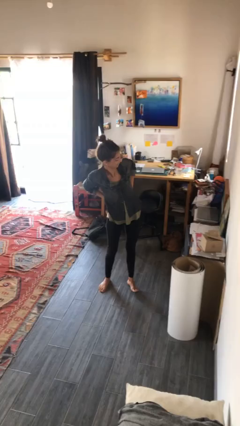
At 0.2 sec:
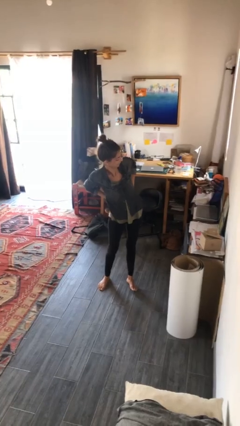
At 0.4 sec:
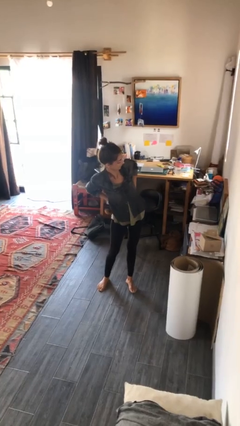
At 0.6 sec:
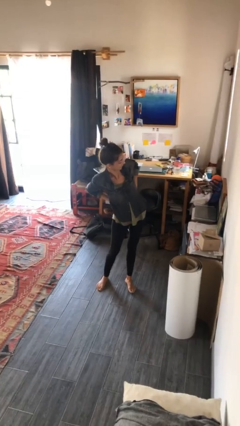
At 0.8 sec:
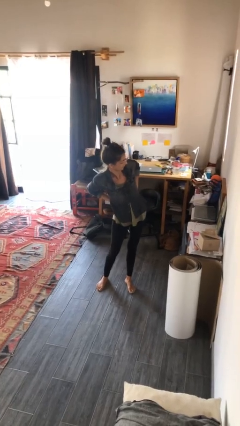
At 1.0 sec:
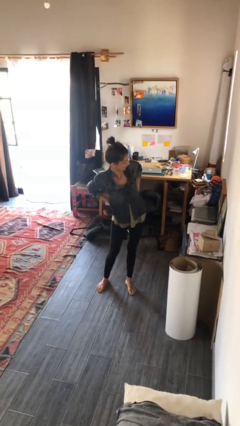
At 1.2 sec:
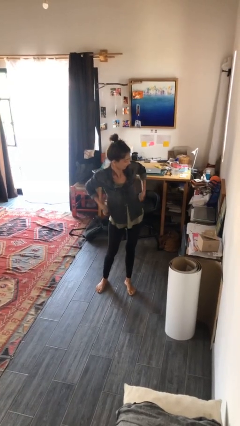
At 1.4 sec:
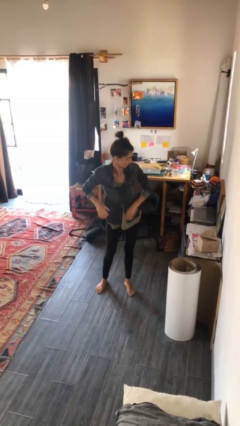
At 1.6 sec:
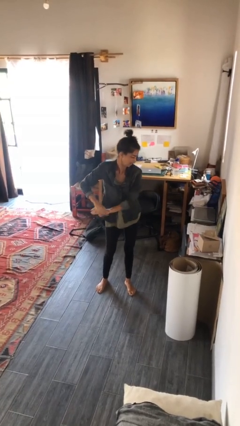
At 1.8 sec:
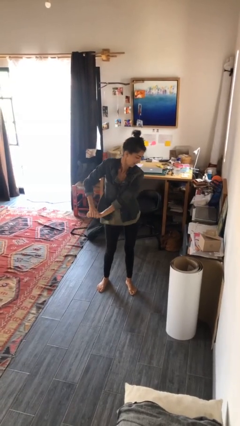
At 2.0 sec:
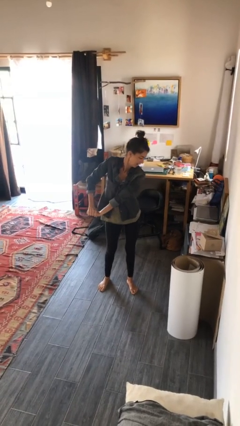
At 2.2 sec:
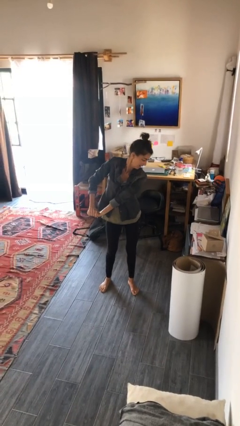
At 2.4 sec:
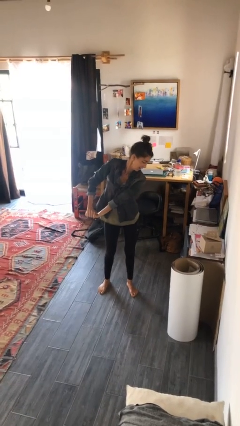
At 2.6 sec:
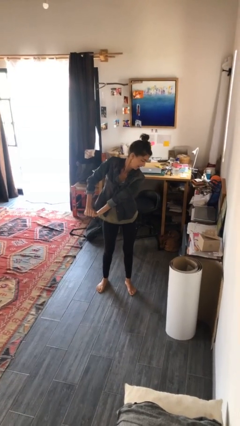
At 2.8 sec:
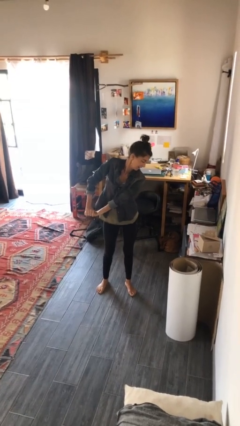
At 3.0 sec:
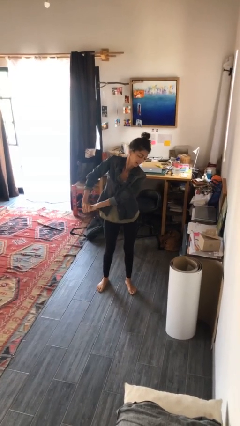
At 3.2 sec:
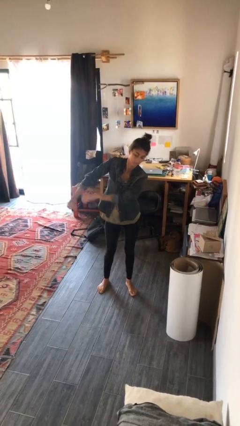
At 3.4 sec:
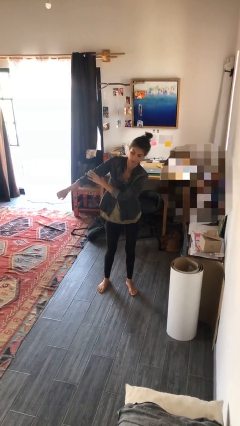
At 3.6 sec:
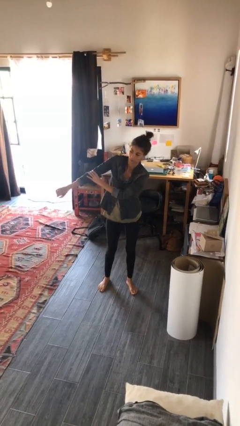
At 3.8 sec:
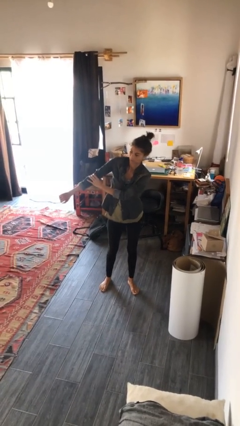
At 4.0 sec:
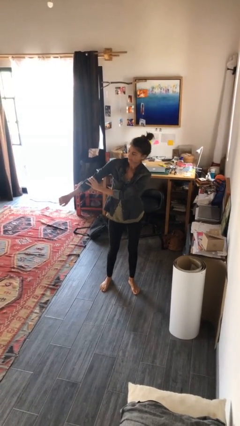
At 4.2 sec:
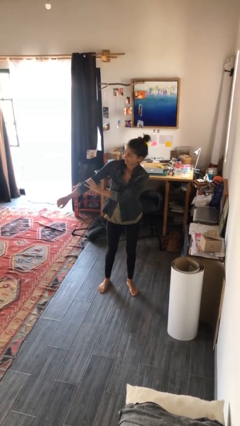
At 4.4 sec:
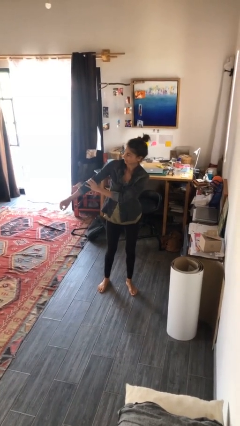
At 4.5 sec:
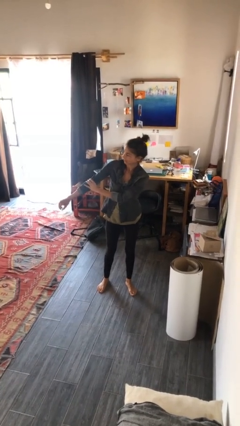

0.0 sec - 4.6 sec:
person stretches arms to side

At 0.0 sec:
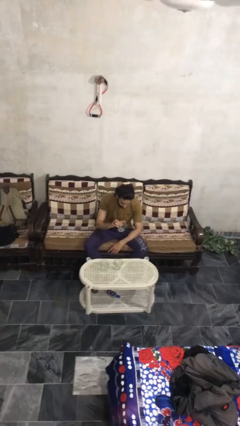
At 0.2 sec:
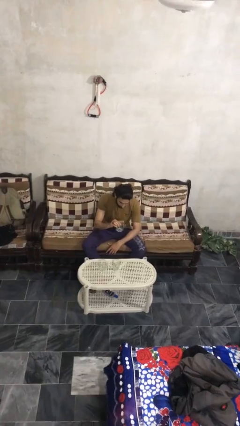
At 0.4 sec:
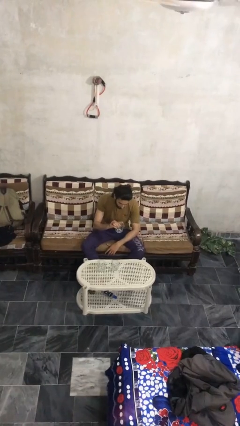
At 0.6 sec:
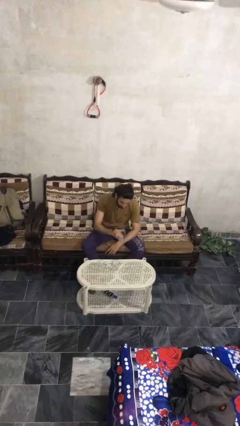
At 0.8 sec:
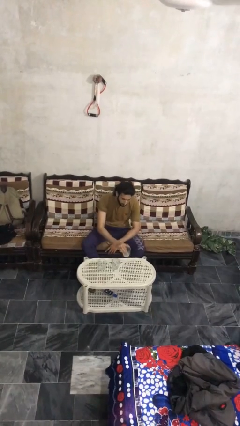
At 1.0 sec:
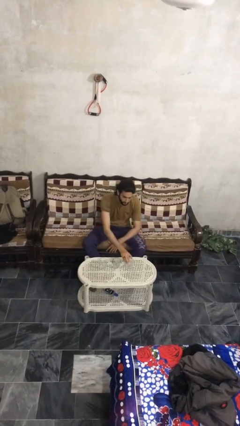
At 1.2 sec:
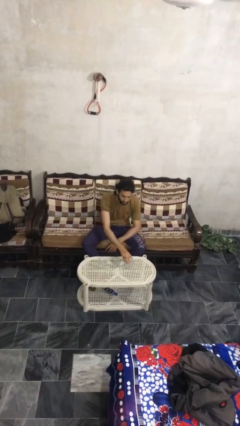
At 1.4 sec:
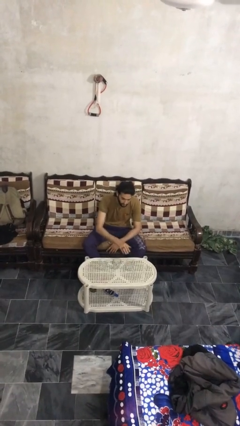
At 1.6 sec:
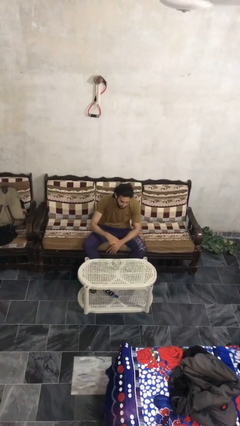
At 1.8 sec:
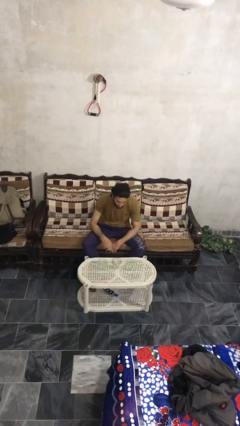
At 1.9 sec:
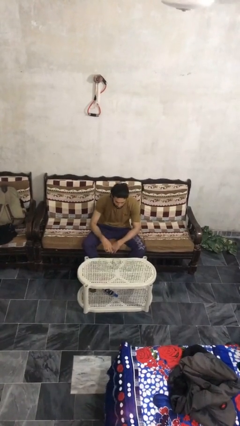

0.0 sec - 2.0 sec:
person puts down object on table

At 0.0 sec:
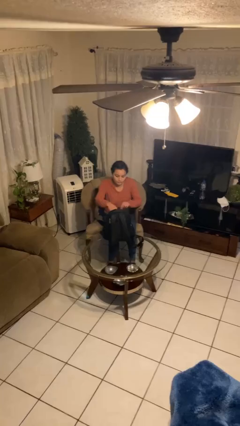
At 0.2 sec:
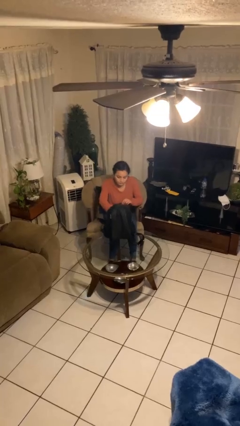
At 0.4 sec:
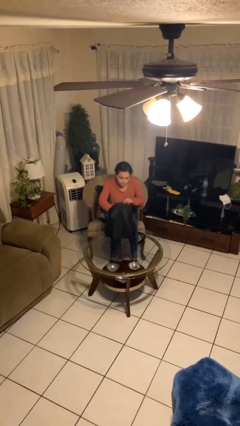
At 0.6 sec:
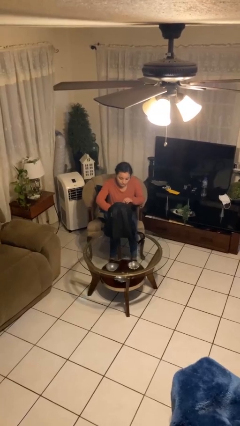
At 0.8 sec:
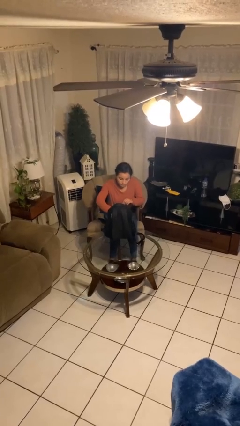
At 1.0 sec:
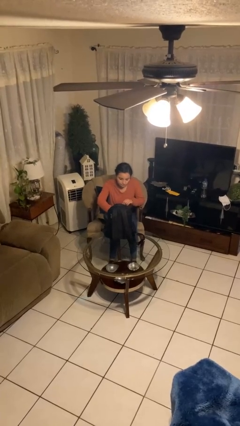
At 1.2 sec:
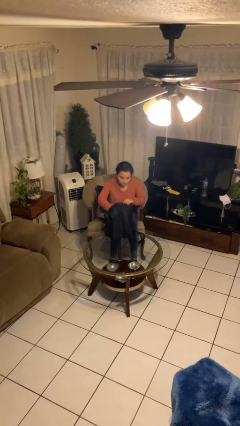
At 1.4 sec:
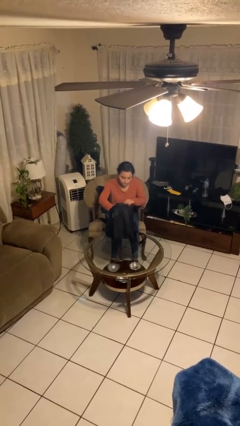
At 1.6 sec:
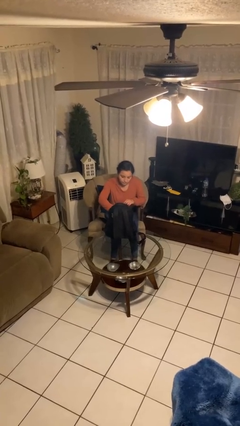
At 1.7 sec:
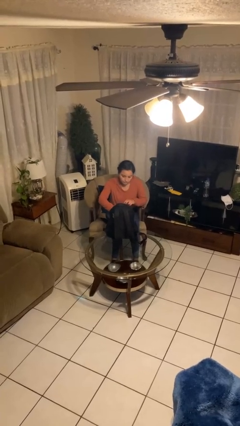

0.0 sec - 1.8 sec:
person searches in backpack

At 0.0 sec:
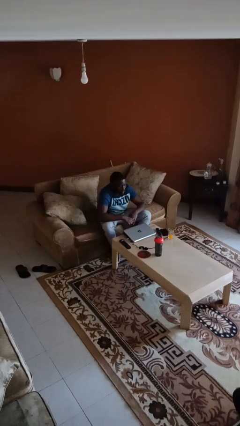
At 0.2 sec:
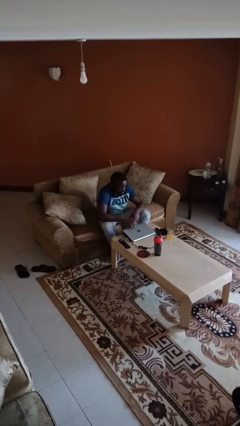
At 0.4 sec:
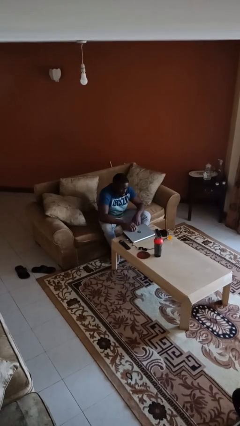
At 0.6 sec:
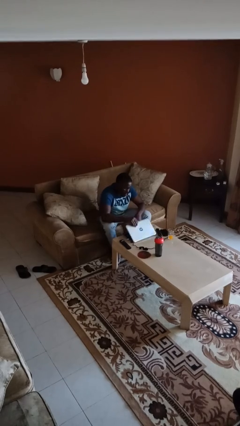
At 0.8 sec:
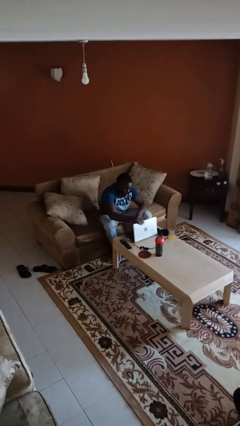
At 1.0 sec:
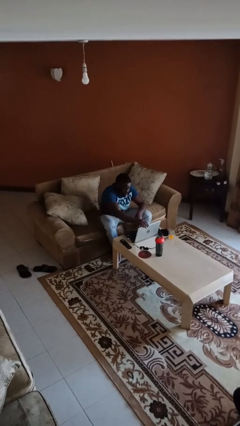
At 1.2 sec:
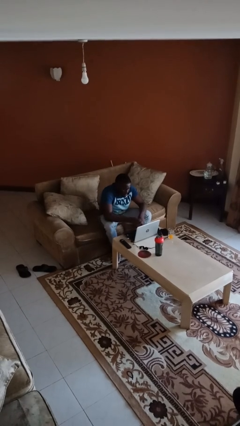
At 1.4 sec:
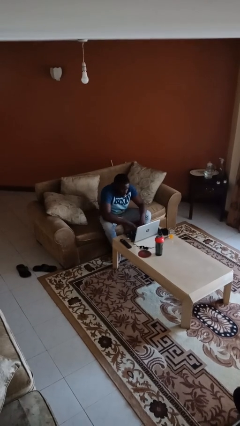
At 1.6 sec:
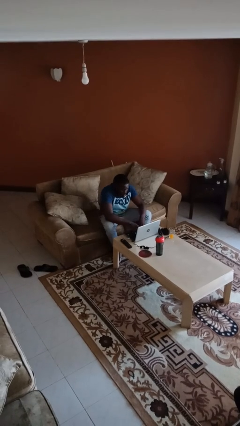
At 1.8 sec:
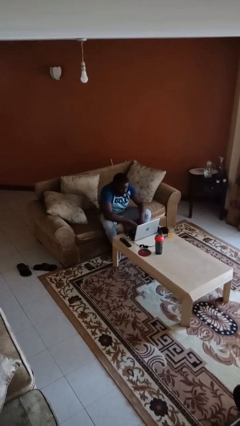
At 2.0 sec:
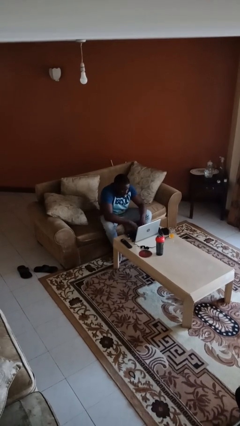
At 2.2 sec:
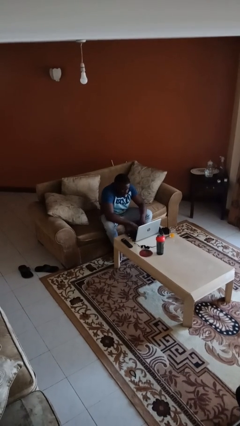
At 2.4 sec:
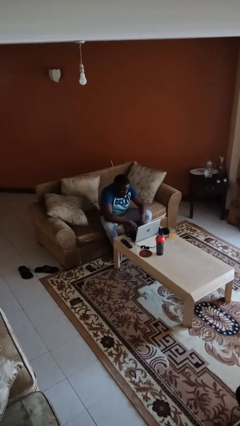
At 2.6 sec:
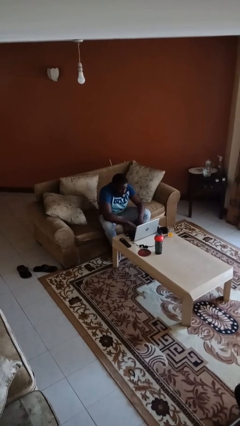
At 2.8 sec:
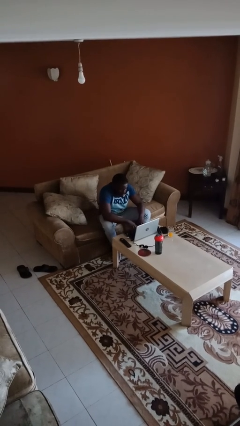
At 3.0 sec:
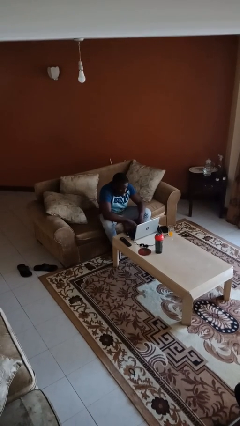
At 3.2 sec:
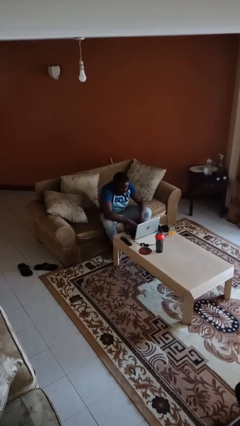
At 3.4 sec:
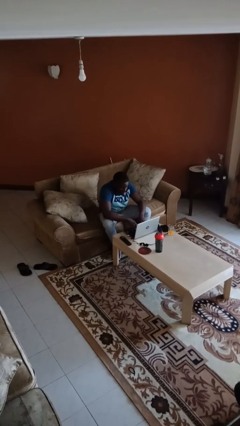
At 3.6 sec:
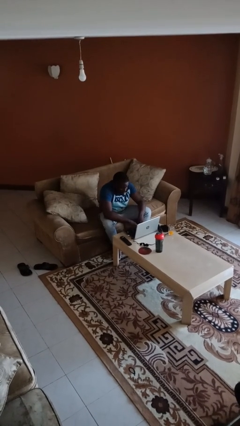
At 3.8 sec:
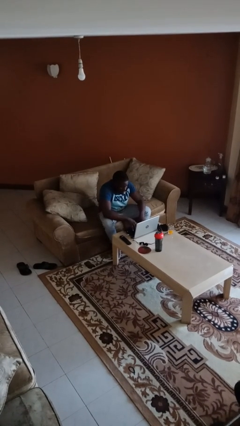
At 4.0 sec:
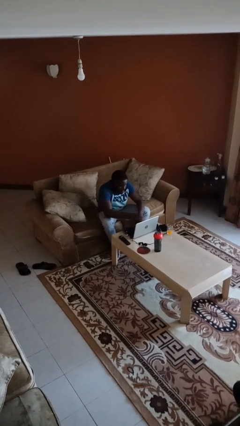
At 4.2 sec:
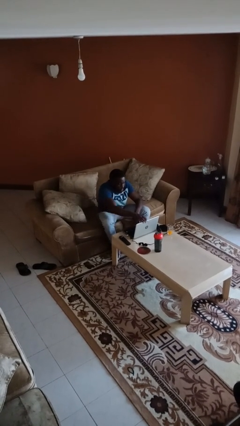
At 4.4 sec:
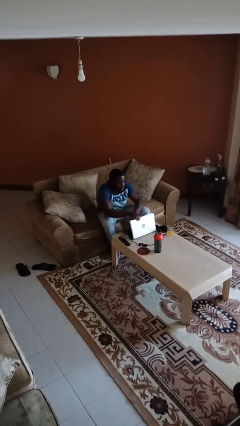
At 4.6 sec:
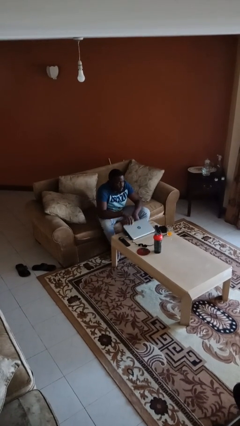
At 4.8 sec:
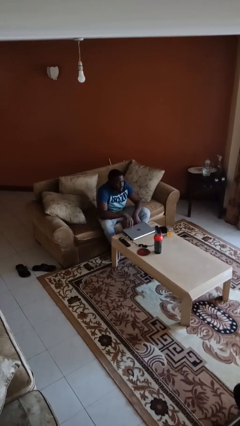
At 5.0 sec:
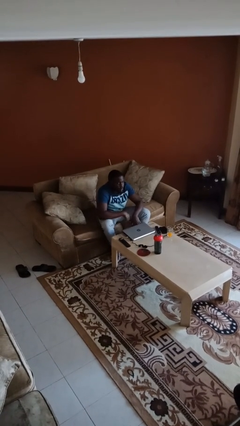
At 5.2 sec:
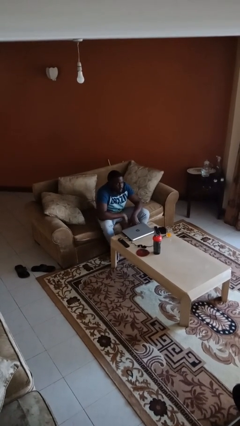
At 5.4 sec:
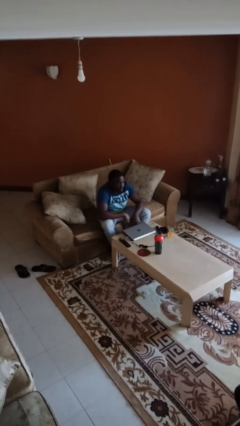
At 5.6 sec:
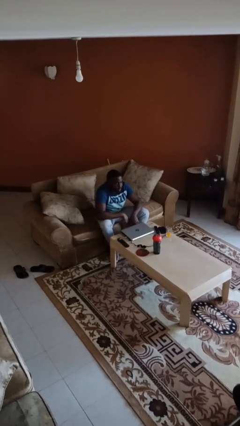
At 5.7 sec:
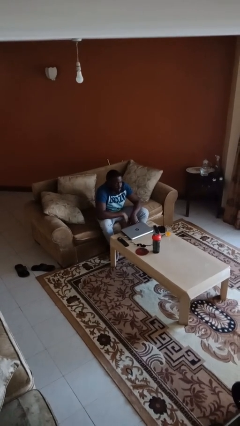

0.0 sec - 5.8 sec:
person interacts with laptop

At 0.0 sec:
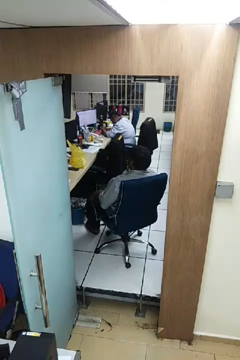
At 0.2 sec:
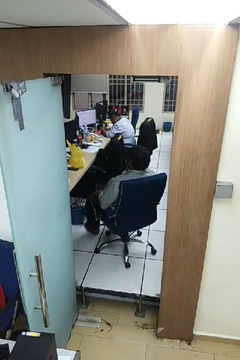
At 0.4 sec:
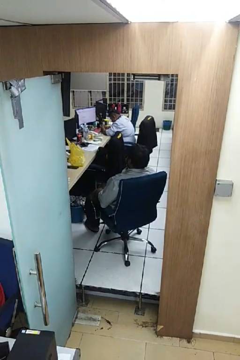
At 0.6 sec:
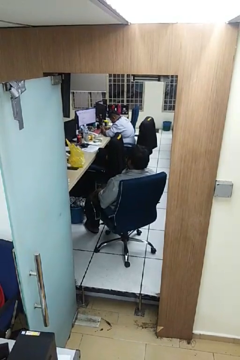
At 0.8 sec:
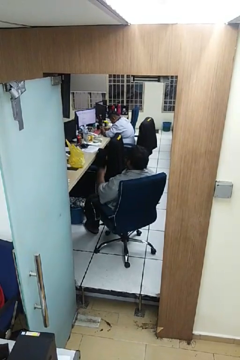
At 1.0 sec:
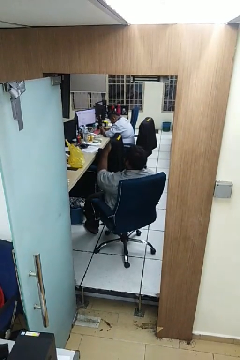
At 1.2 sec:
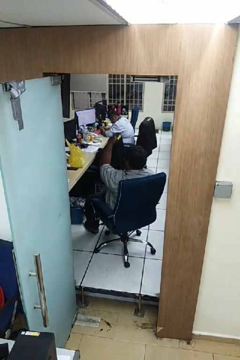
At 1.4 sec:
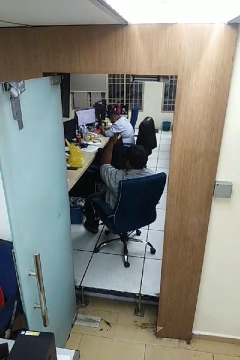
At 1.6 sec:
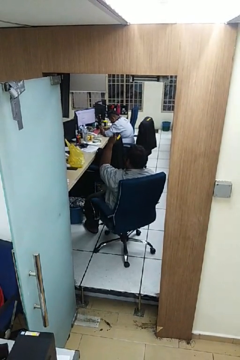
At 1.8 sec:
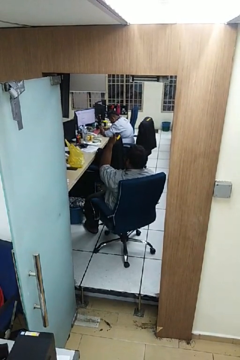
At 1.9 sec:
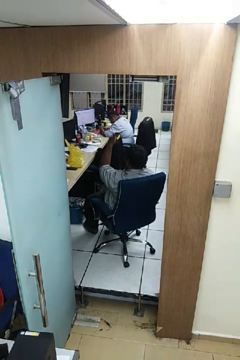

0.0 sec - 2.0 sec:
person gestures thumbs up

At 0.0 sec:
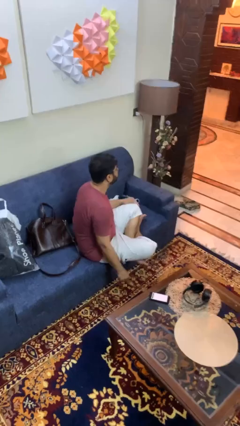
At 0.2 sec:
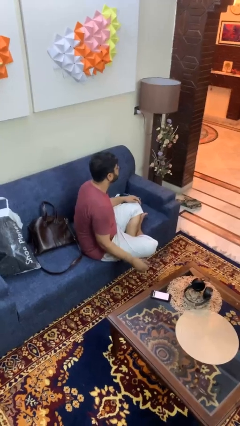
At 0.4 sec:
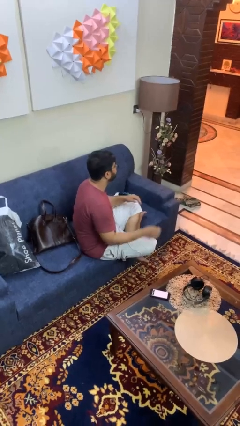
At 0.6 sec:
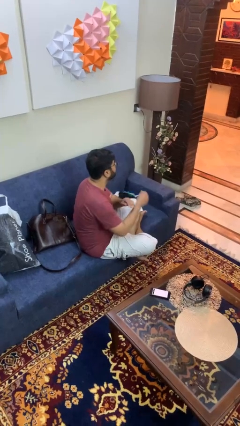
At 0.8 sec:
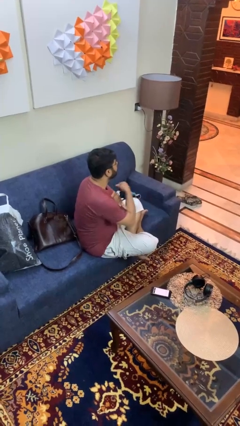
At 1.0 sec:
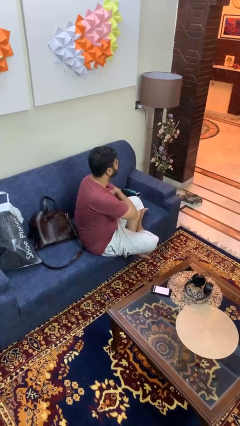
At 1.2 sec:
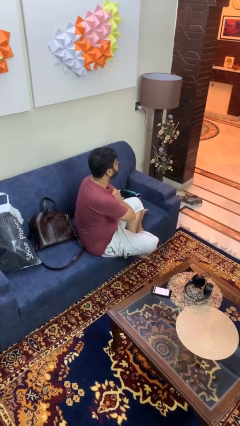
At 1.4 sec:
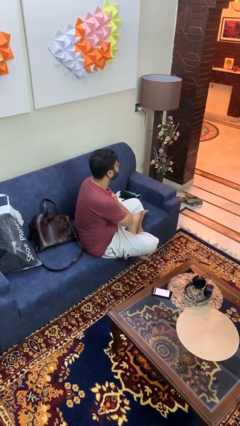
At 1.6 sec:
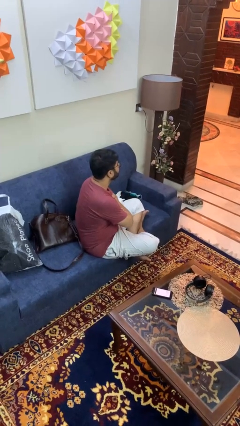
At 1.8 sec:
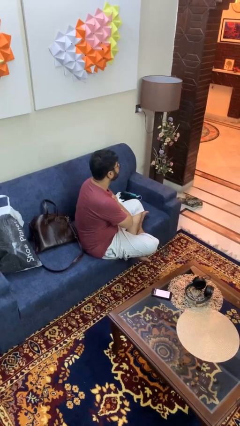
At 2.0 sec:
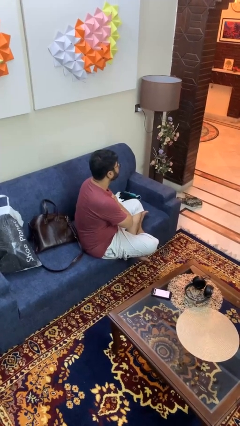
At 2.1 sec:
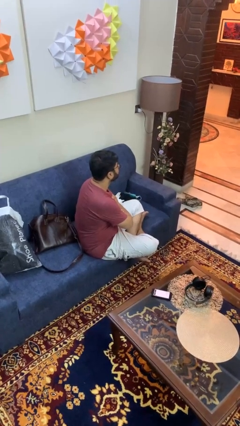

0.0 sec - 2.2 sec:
person crosses arms
